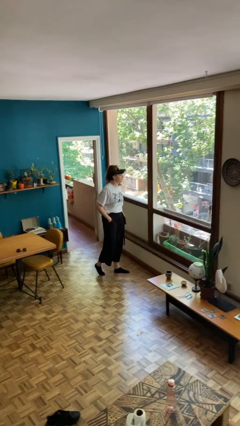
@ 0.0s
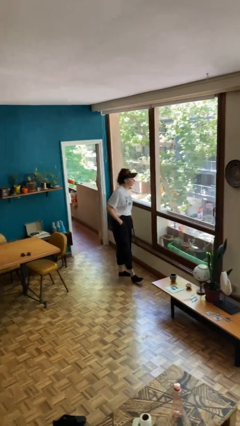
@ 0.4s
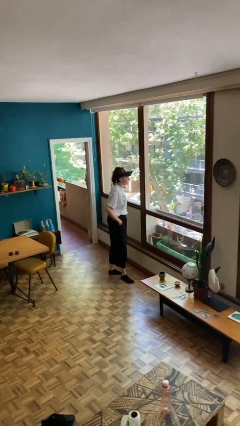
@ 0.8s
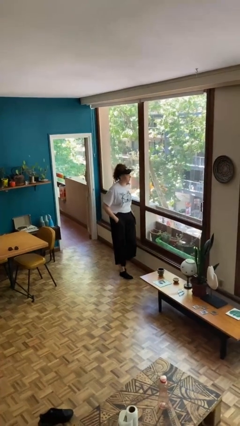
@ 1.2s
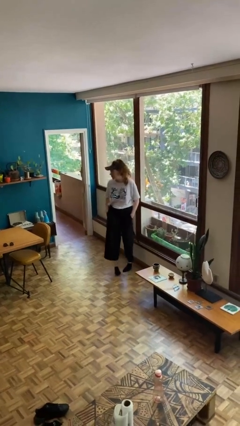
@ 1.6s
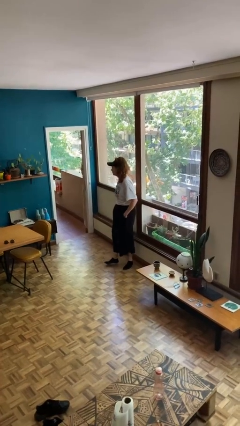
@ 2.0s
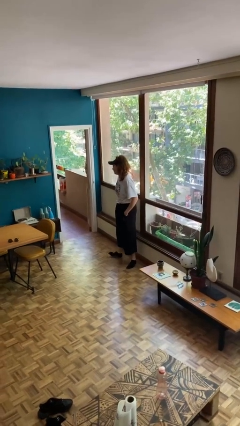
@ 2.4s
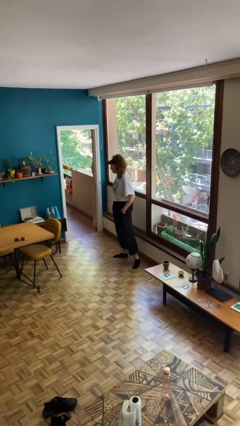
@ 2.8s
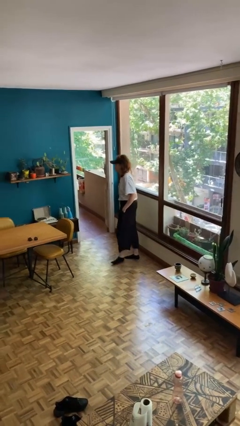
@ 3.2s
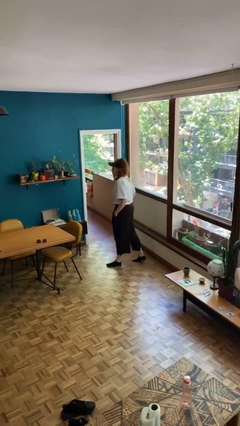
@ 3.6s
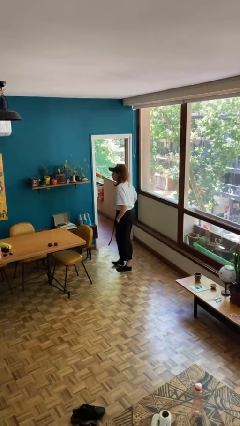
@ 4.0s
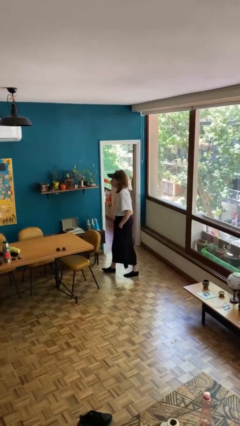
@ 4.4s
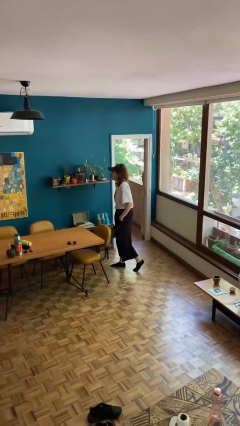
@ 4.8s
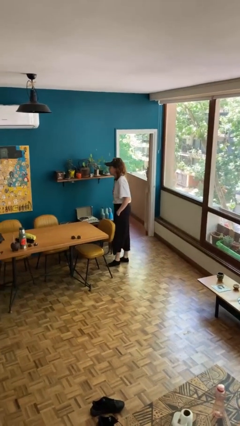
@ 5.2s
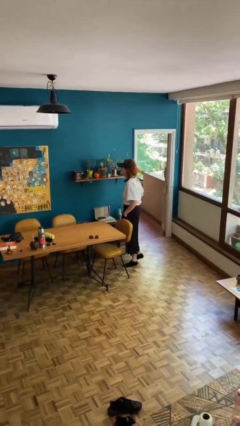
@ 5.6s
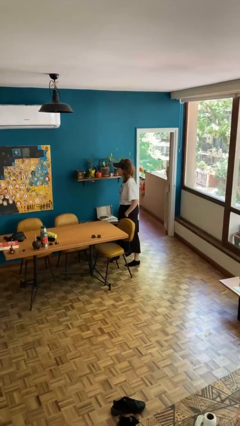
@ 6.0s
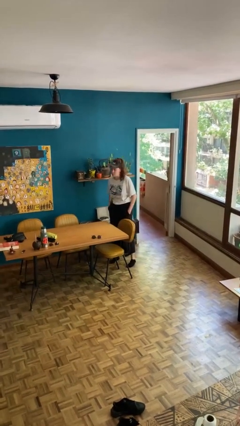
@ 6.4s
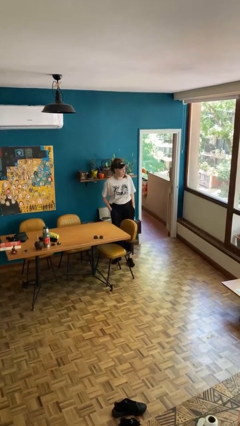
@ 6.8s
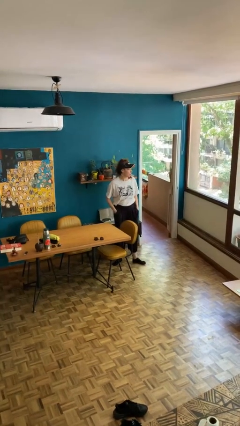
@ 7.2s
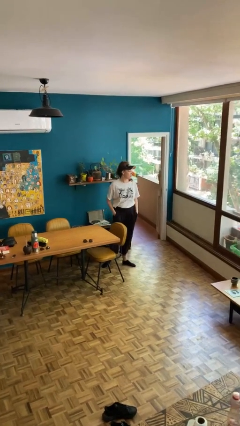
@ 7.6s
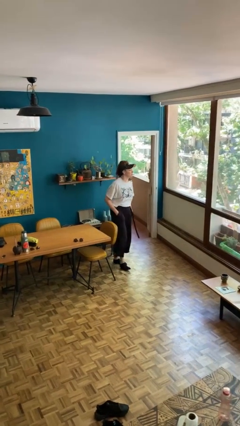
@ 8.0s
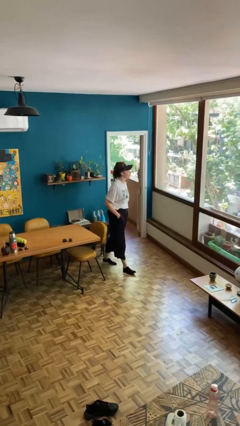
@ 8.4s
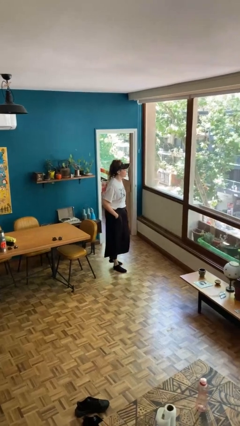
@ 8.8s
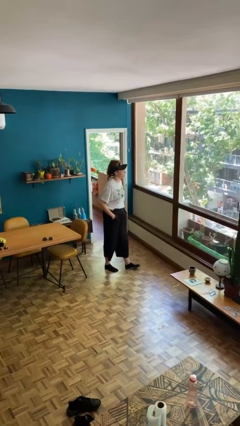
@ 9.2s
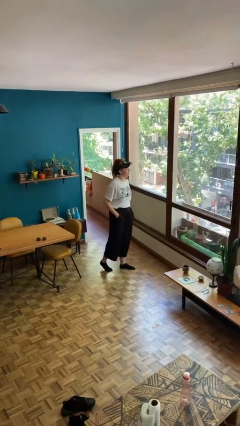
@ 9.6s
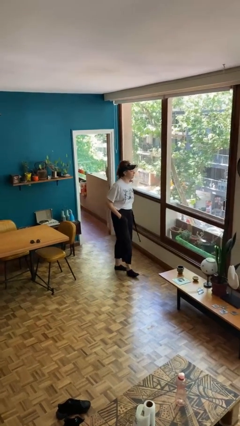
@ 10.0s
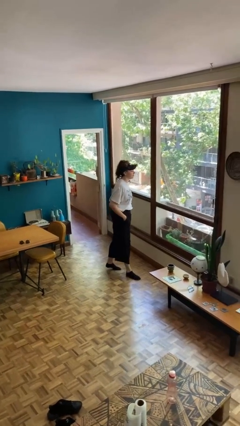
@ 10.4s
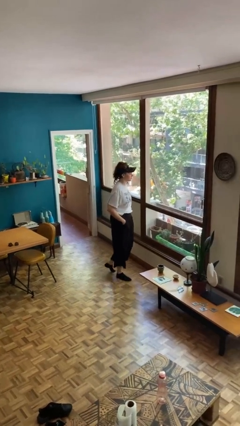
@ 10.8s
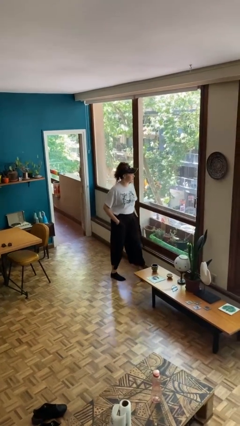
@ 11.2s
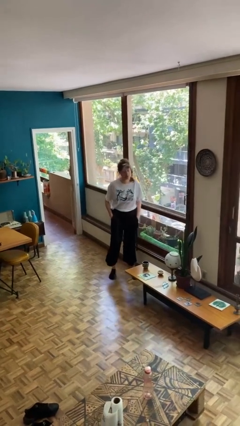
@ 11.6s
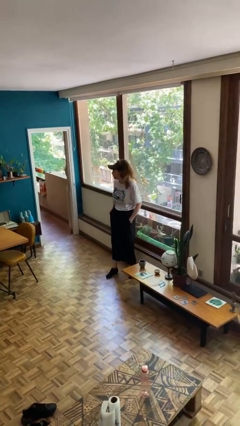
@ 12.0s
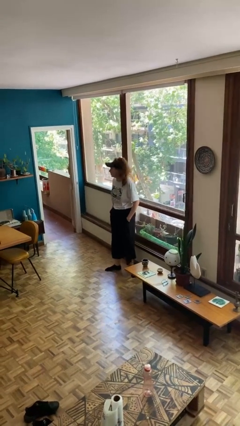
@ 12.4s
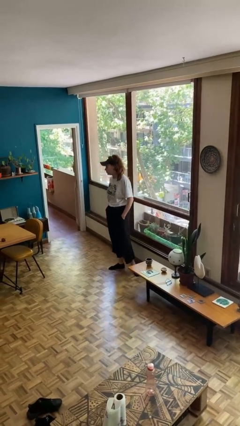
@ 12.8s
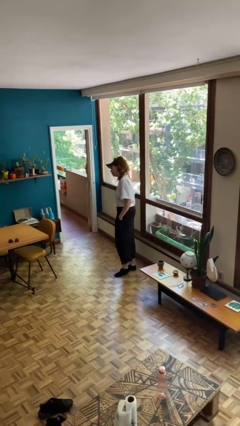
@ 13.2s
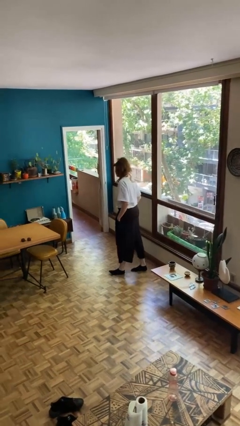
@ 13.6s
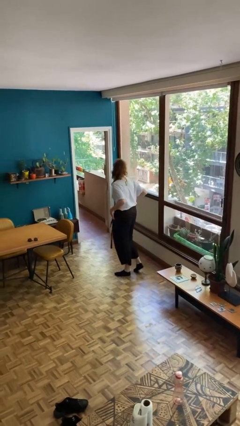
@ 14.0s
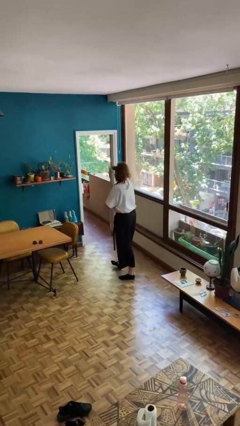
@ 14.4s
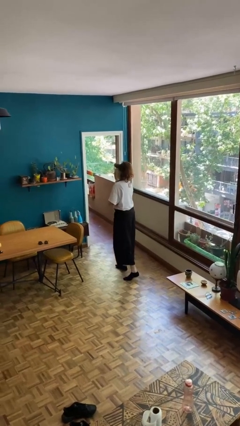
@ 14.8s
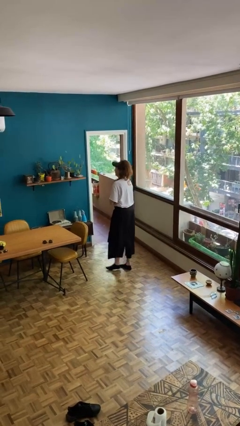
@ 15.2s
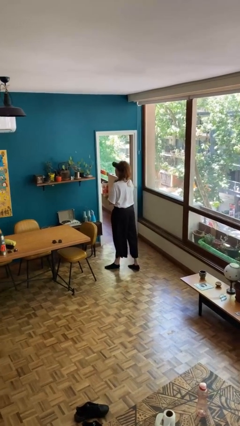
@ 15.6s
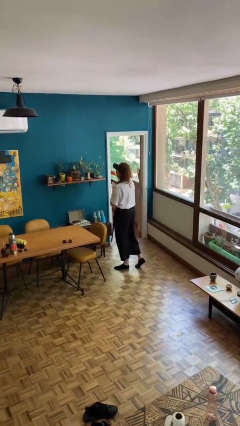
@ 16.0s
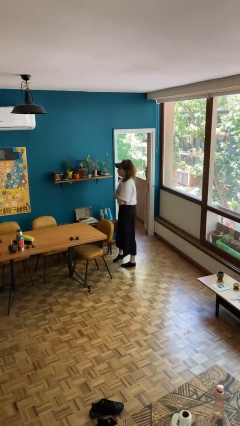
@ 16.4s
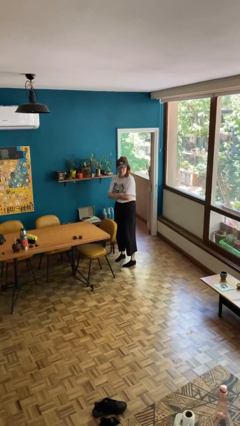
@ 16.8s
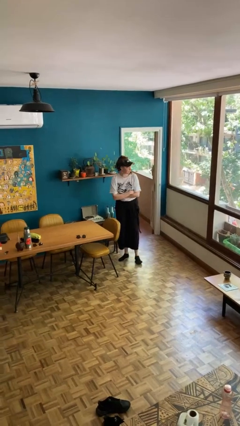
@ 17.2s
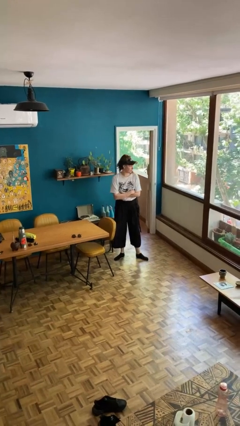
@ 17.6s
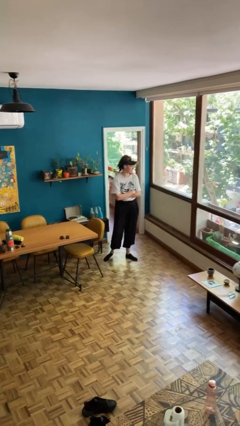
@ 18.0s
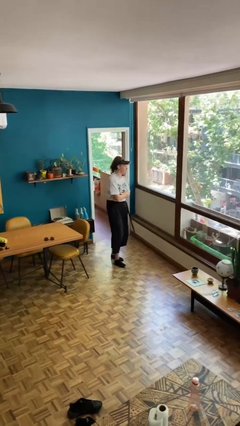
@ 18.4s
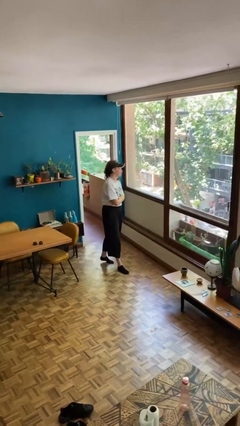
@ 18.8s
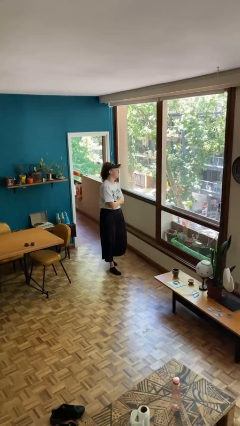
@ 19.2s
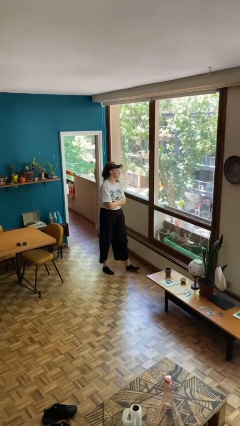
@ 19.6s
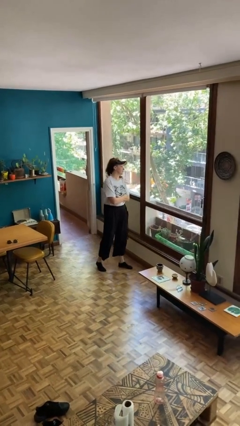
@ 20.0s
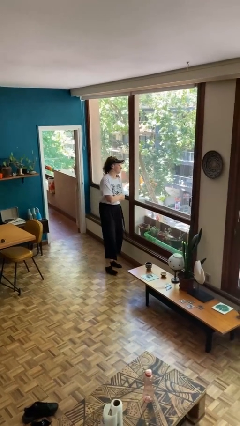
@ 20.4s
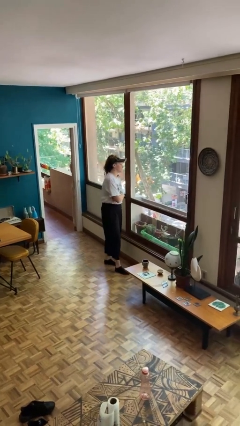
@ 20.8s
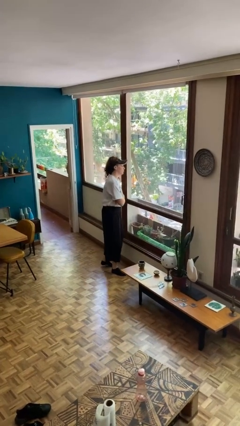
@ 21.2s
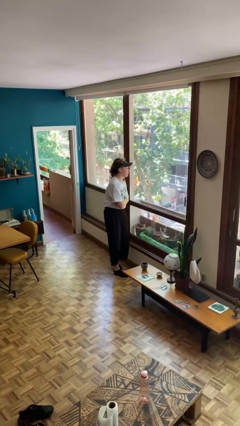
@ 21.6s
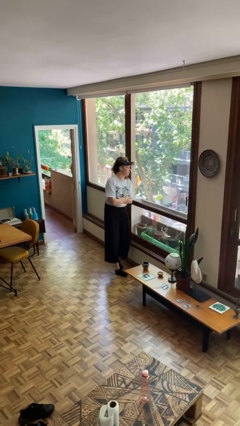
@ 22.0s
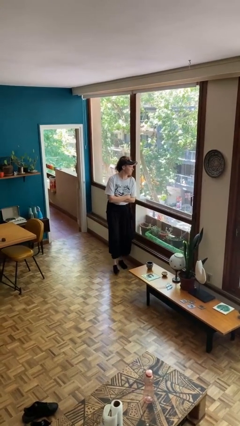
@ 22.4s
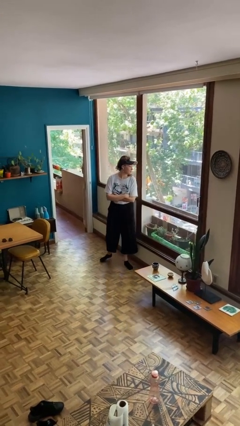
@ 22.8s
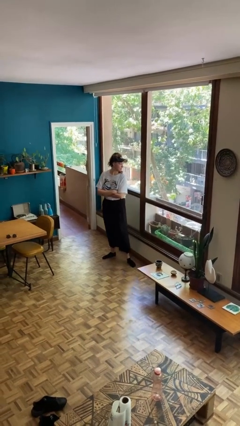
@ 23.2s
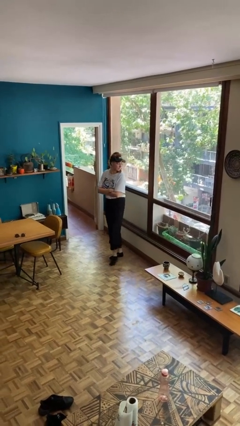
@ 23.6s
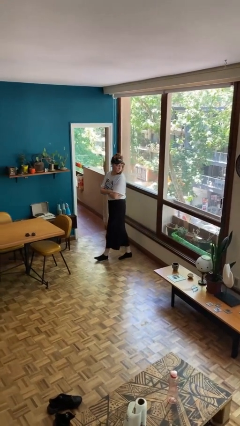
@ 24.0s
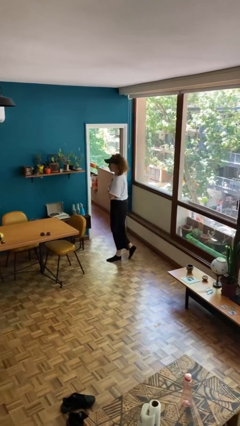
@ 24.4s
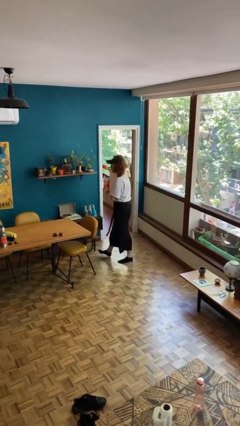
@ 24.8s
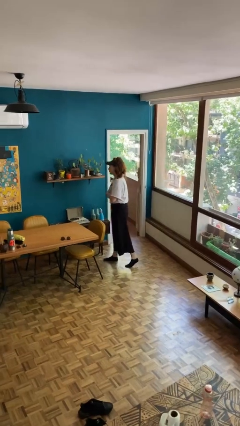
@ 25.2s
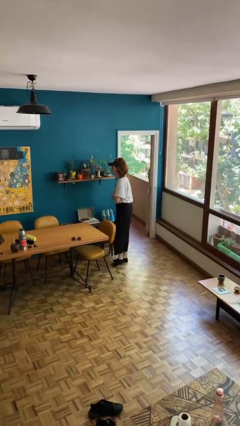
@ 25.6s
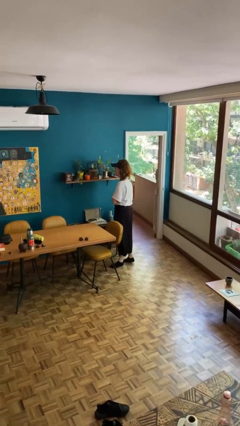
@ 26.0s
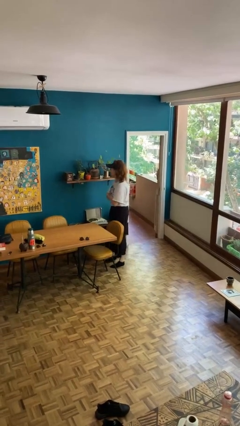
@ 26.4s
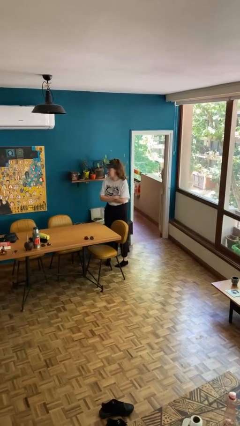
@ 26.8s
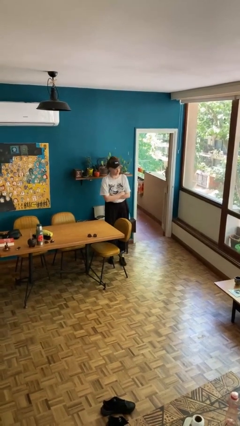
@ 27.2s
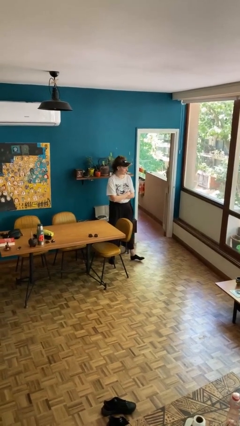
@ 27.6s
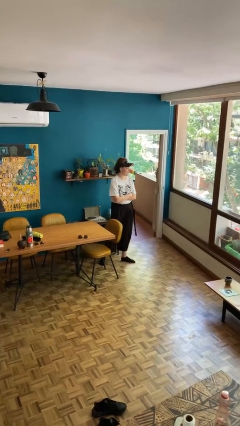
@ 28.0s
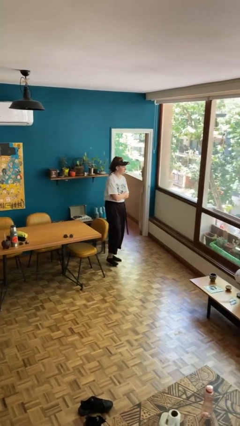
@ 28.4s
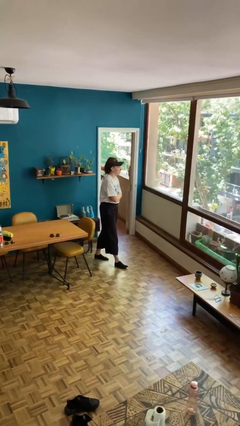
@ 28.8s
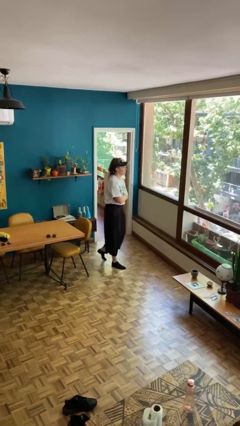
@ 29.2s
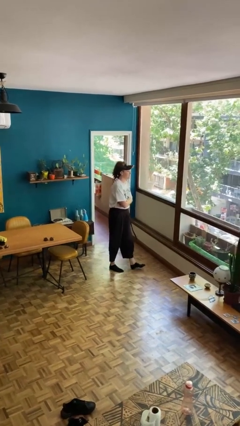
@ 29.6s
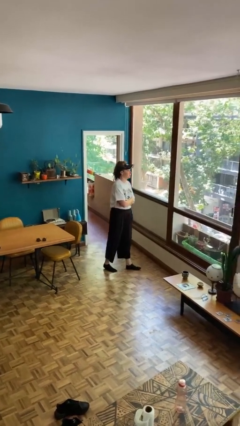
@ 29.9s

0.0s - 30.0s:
person walks

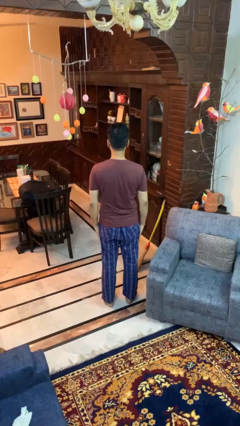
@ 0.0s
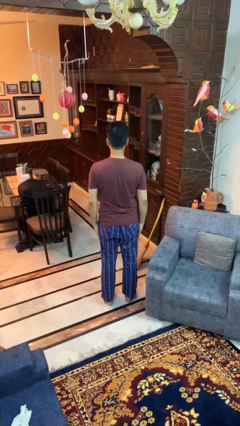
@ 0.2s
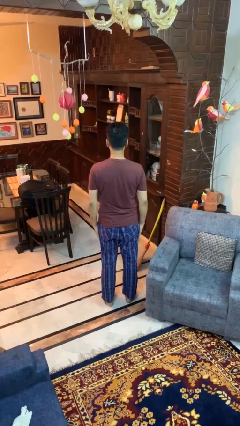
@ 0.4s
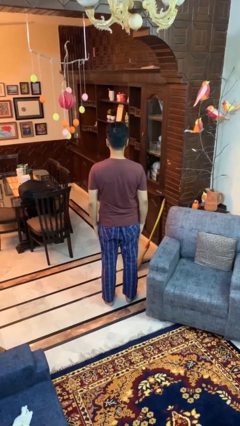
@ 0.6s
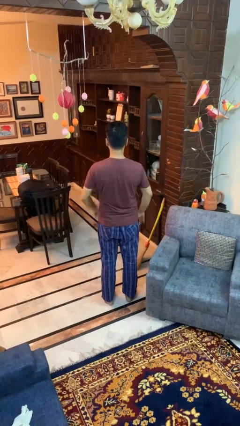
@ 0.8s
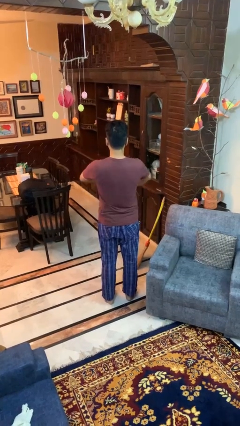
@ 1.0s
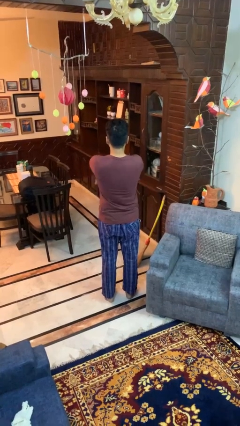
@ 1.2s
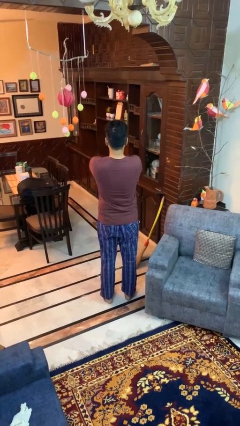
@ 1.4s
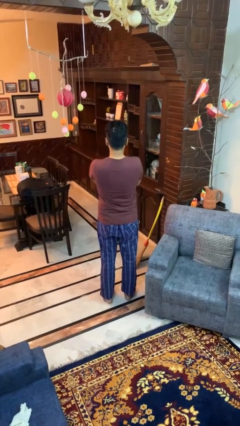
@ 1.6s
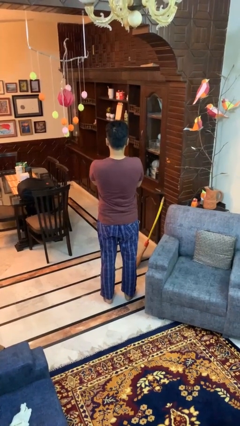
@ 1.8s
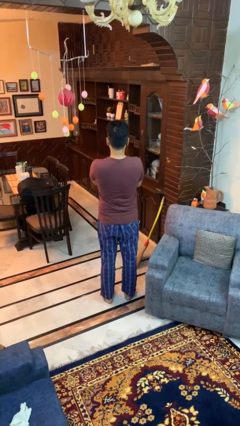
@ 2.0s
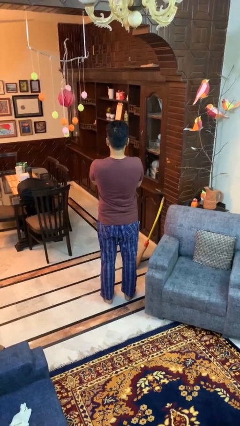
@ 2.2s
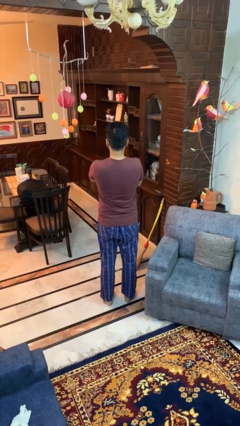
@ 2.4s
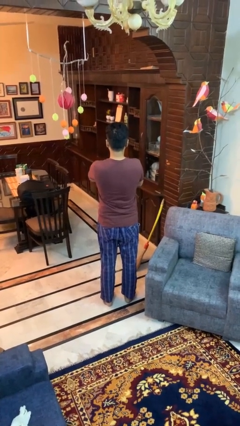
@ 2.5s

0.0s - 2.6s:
person crosses arms

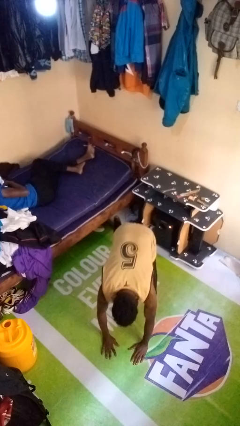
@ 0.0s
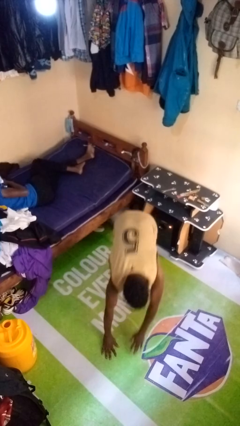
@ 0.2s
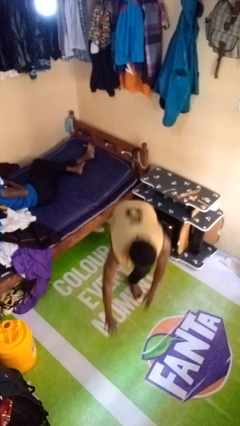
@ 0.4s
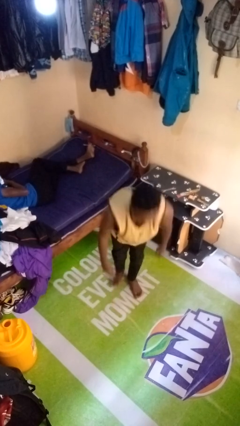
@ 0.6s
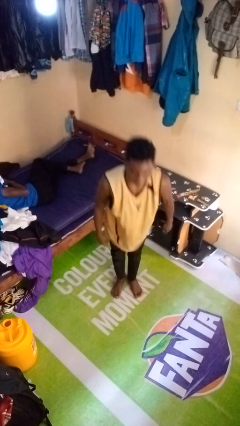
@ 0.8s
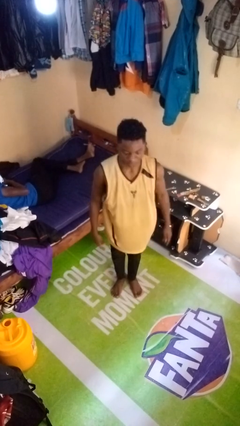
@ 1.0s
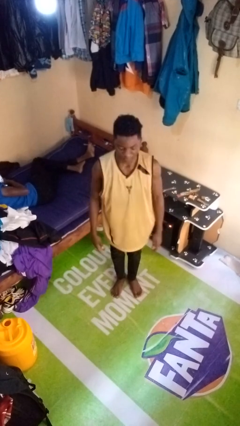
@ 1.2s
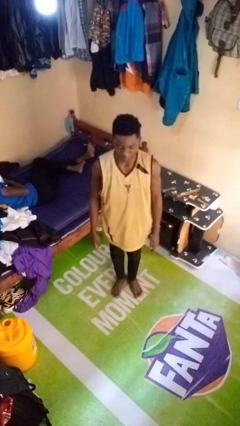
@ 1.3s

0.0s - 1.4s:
person stands up from floor
